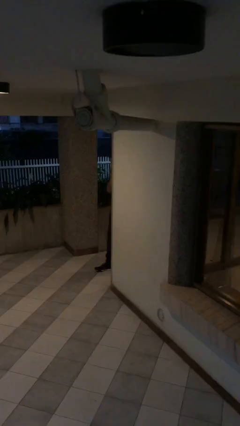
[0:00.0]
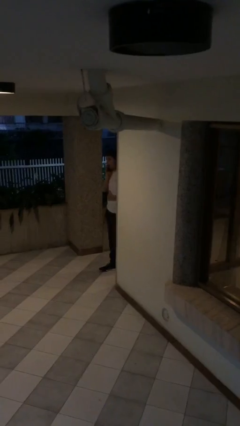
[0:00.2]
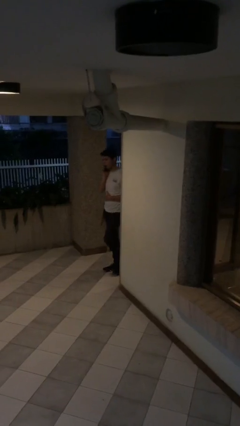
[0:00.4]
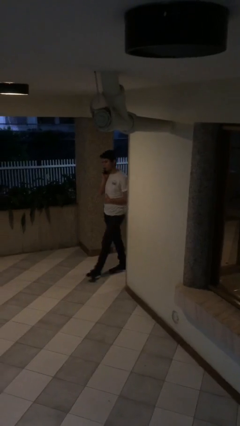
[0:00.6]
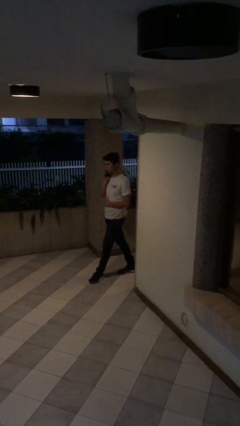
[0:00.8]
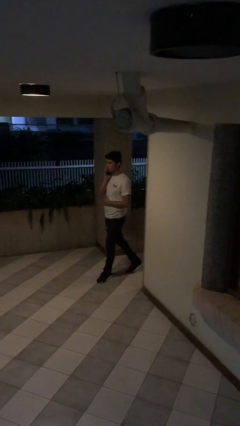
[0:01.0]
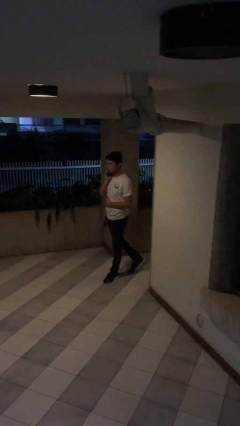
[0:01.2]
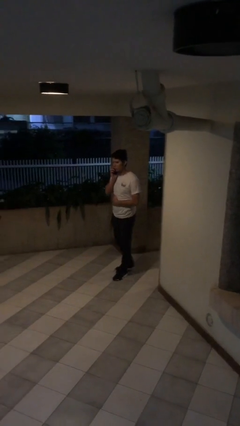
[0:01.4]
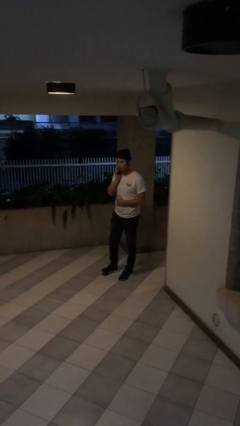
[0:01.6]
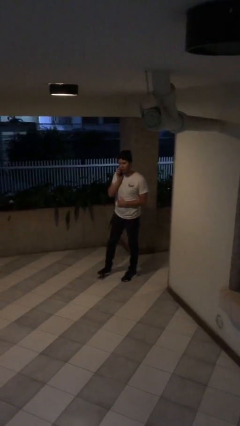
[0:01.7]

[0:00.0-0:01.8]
person enters scene through structure

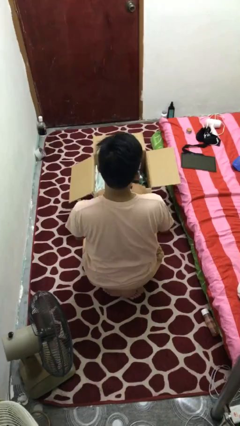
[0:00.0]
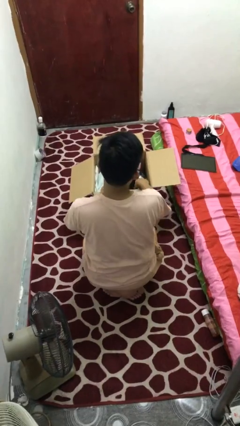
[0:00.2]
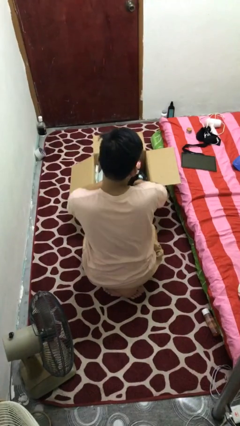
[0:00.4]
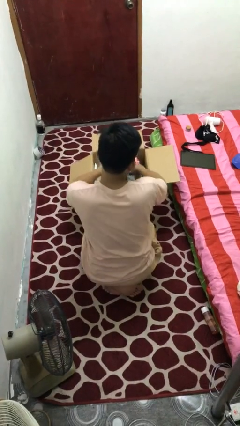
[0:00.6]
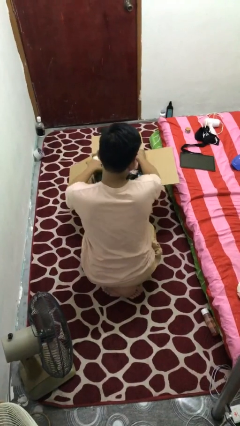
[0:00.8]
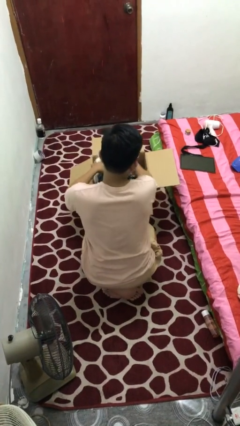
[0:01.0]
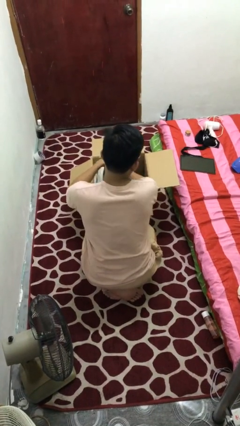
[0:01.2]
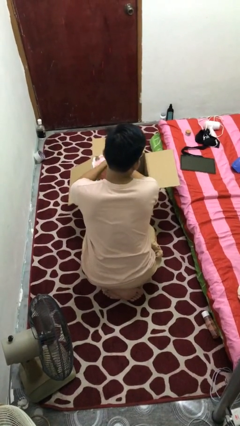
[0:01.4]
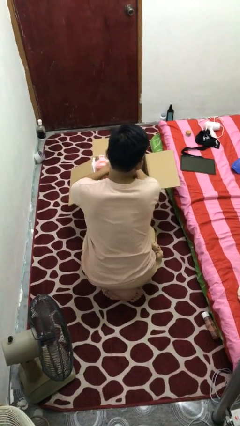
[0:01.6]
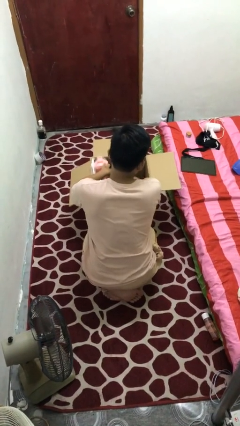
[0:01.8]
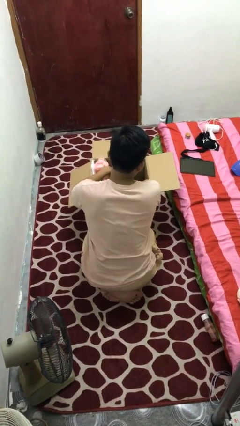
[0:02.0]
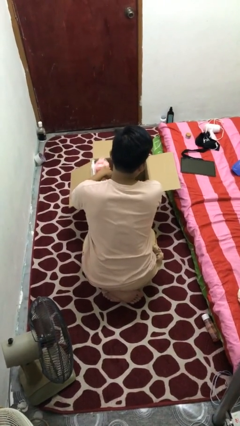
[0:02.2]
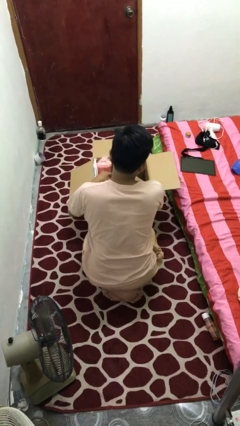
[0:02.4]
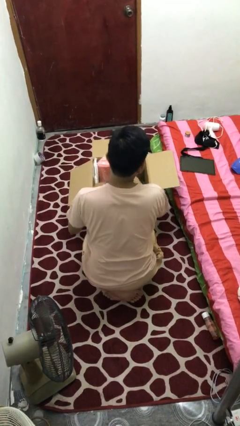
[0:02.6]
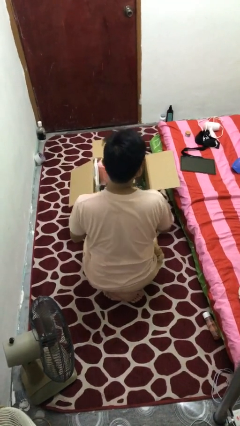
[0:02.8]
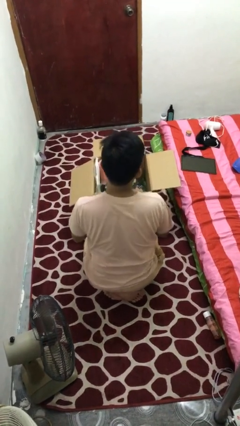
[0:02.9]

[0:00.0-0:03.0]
person searches in box

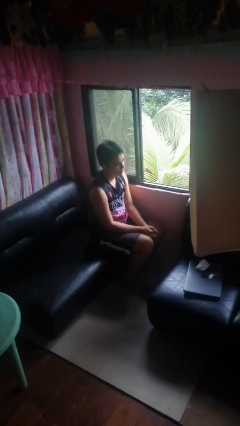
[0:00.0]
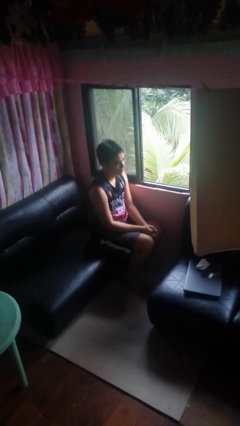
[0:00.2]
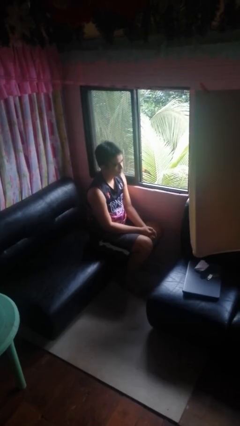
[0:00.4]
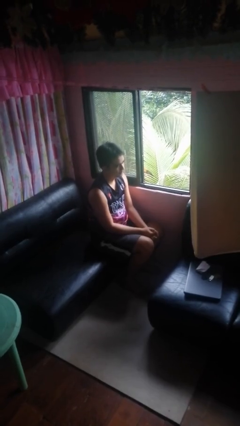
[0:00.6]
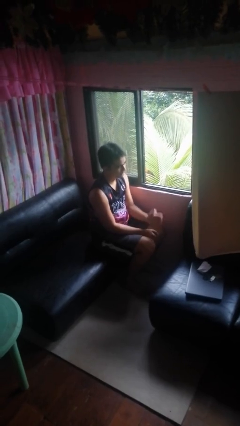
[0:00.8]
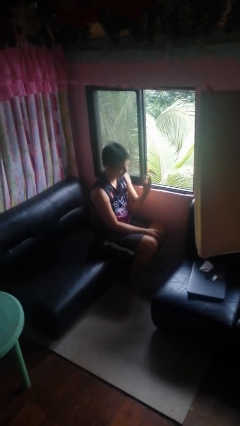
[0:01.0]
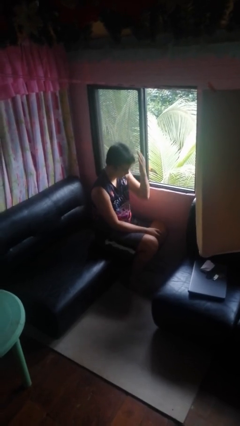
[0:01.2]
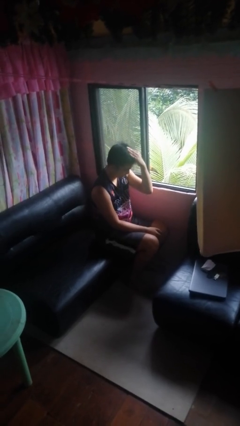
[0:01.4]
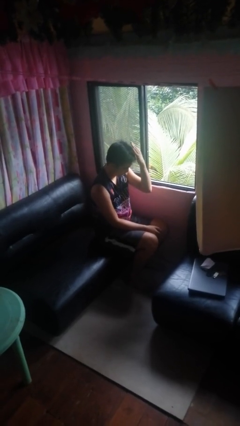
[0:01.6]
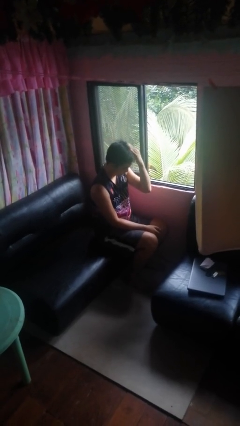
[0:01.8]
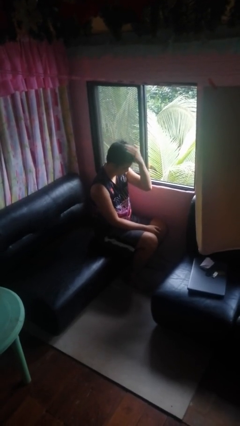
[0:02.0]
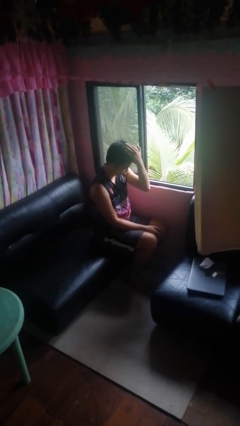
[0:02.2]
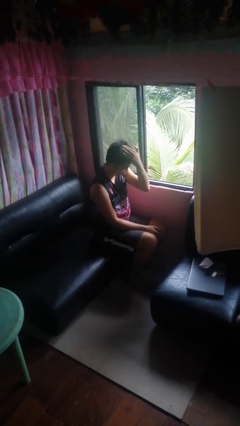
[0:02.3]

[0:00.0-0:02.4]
person pats head

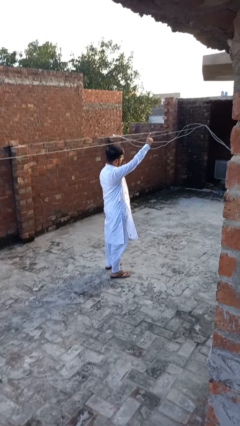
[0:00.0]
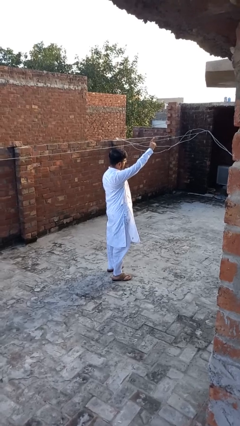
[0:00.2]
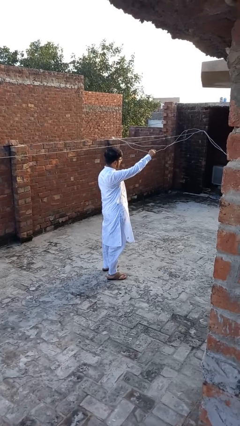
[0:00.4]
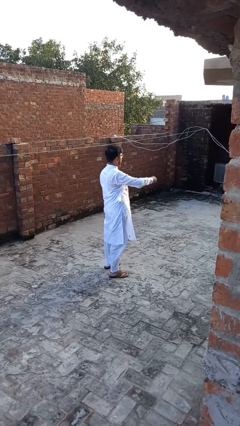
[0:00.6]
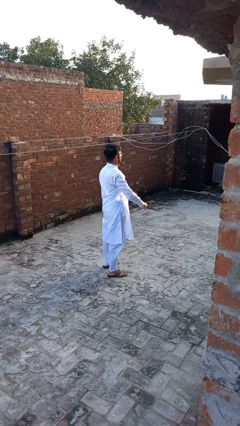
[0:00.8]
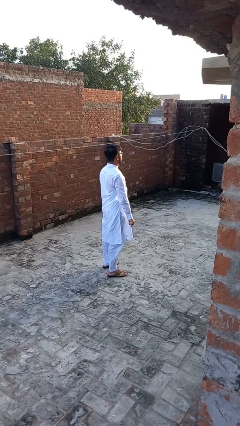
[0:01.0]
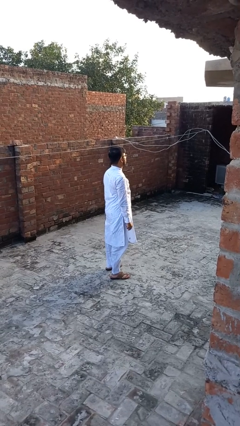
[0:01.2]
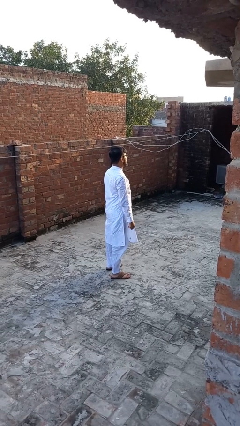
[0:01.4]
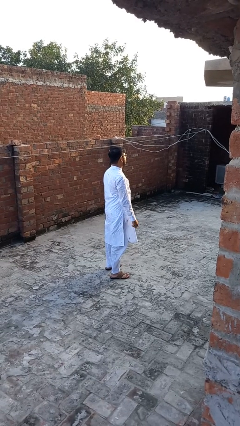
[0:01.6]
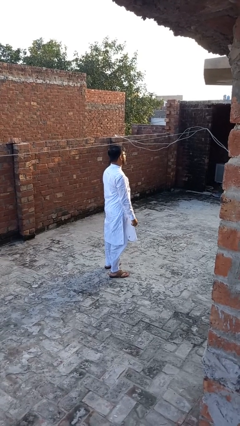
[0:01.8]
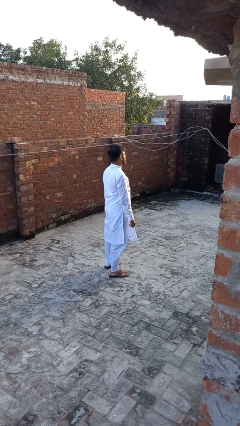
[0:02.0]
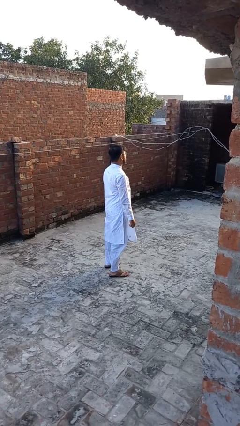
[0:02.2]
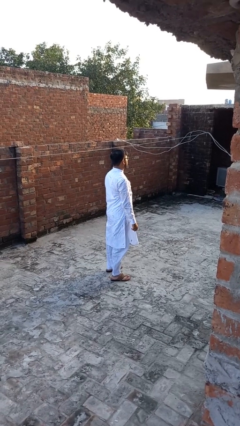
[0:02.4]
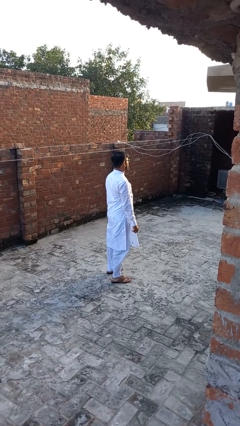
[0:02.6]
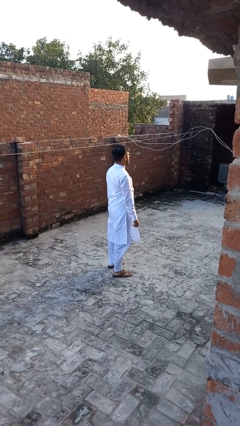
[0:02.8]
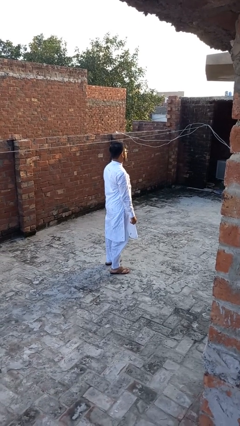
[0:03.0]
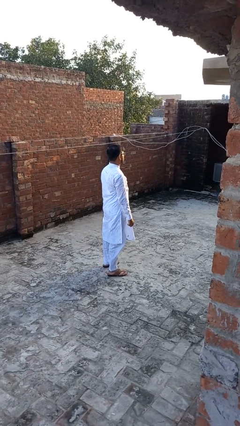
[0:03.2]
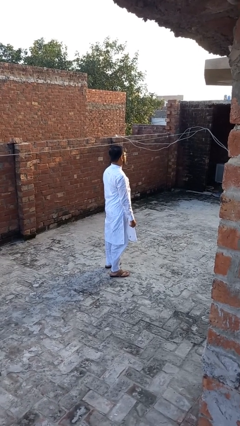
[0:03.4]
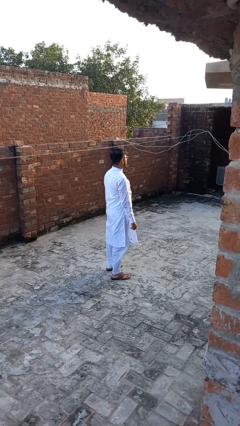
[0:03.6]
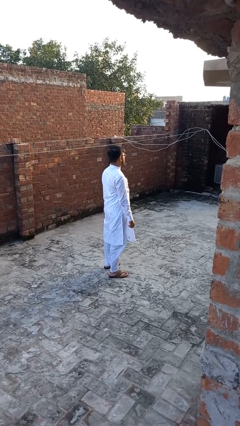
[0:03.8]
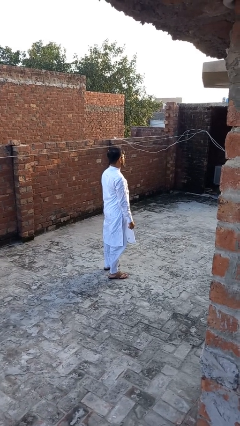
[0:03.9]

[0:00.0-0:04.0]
person gestures lower hand

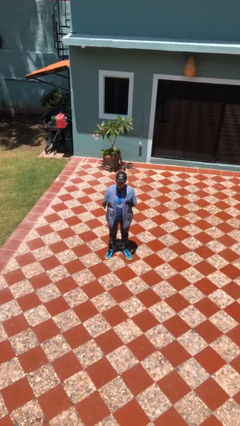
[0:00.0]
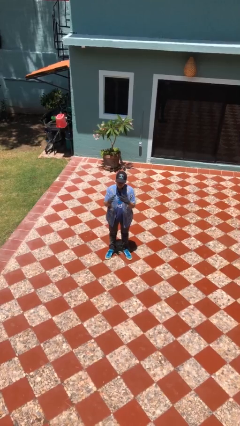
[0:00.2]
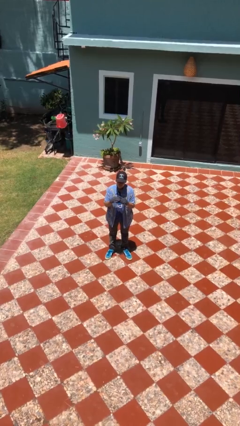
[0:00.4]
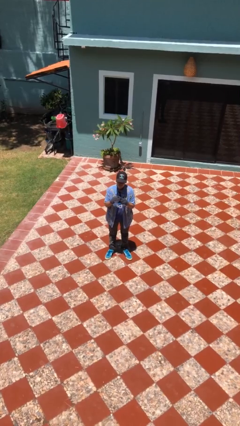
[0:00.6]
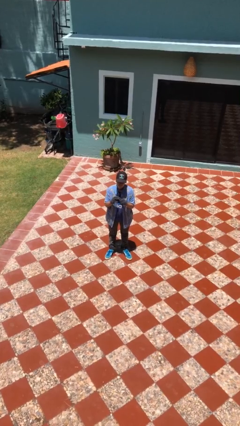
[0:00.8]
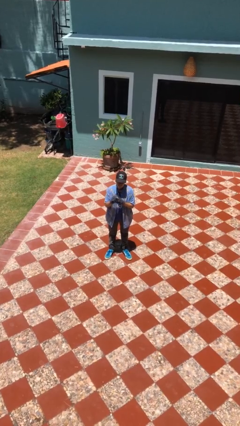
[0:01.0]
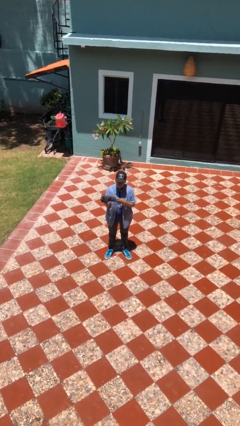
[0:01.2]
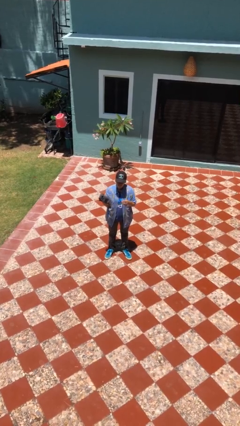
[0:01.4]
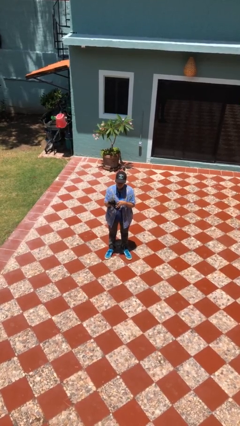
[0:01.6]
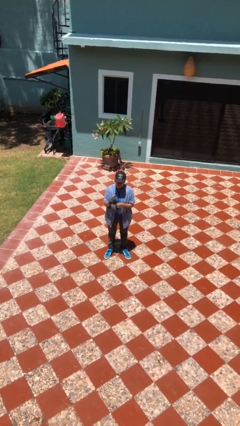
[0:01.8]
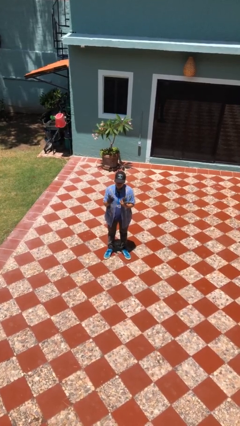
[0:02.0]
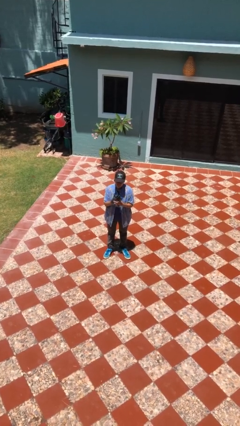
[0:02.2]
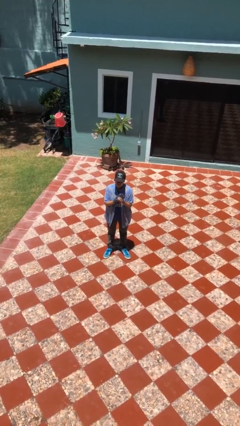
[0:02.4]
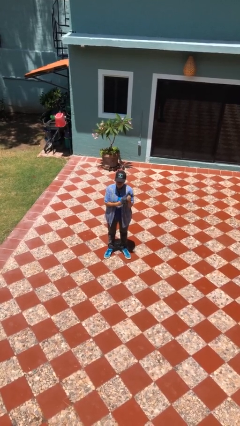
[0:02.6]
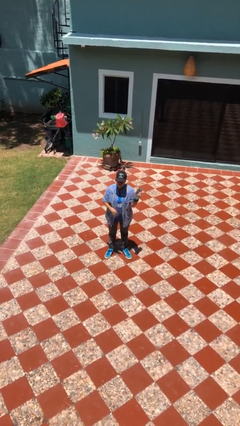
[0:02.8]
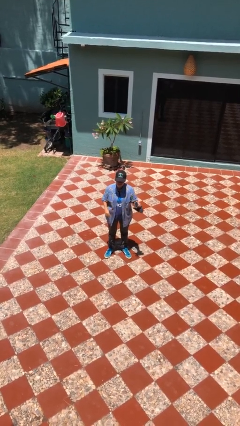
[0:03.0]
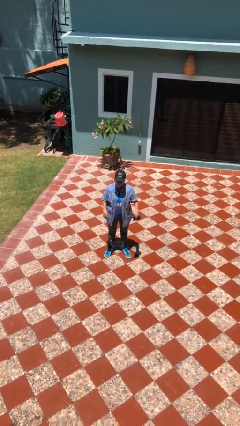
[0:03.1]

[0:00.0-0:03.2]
person takes off gloves

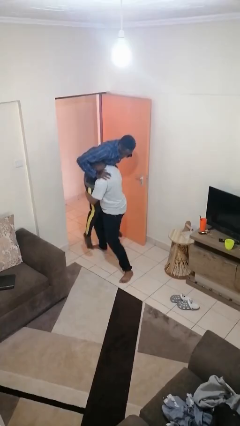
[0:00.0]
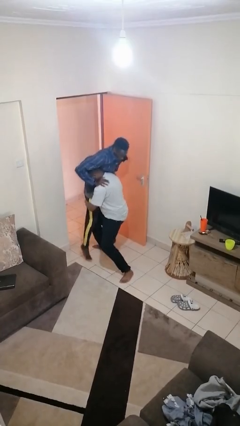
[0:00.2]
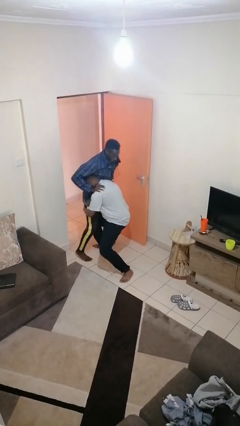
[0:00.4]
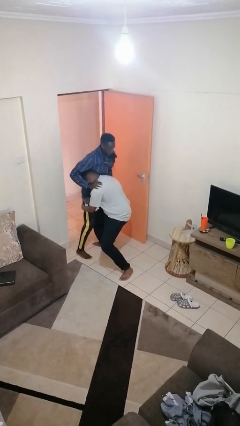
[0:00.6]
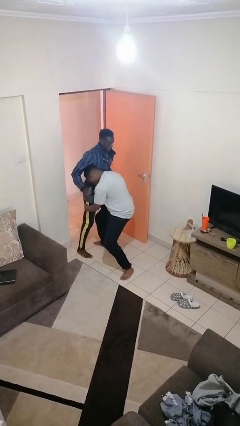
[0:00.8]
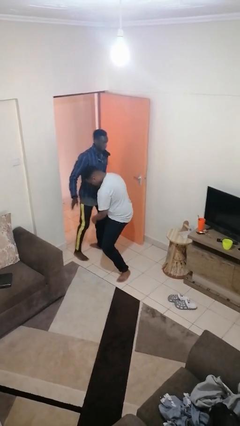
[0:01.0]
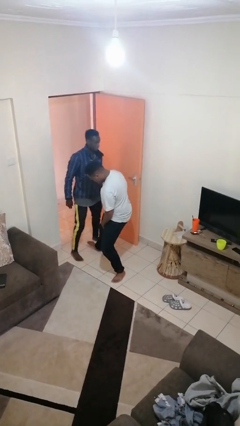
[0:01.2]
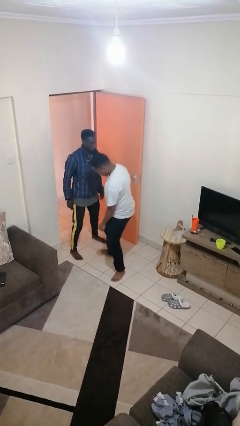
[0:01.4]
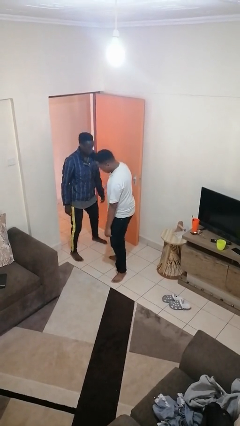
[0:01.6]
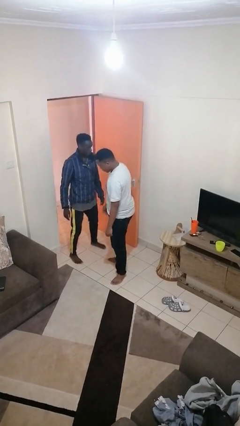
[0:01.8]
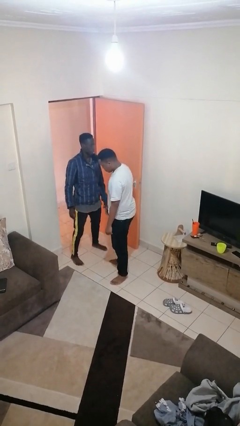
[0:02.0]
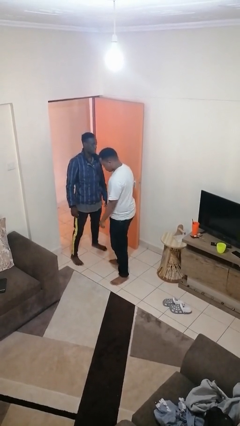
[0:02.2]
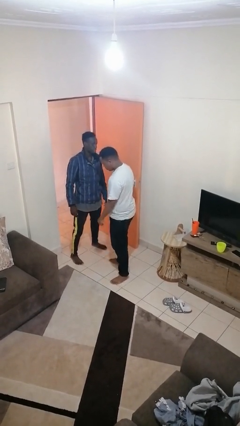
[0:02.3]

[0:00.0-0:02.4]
person puts down person

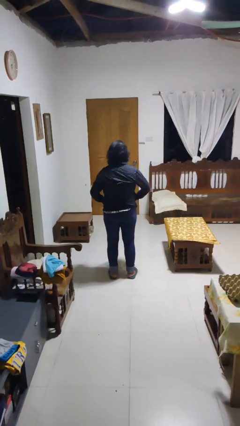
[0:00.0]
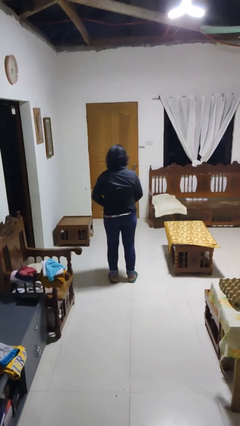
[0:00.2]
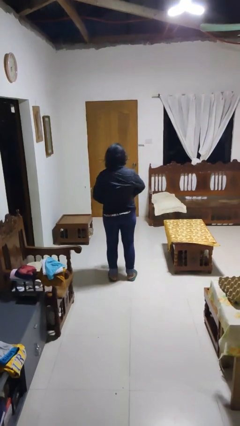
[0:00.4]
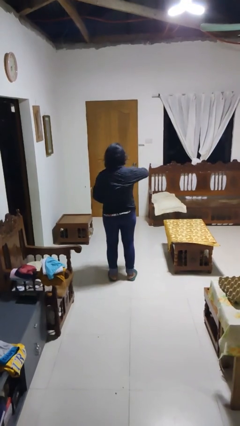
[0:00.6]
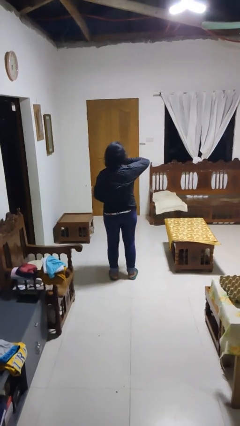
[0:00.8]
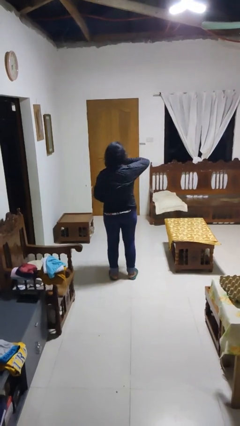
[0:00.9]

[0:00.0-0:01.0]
person zips up jacket
